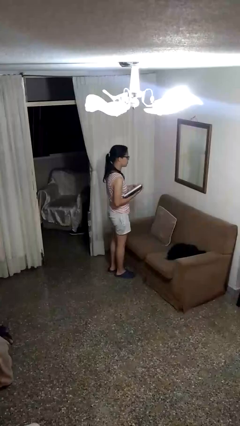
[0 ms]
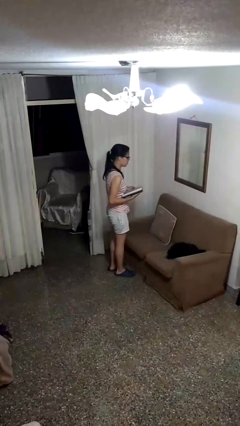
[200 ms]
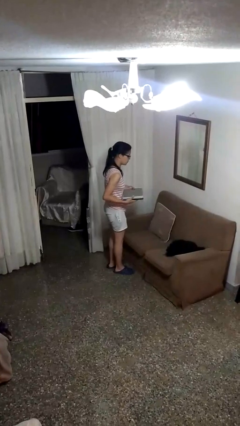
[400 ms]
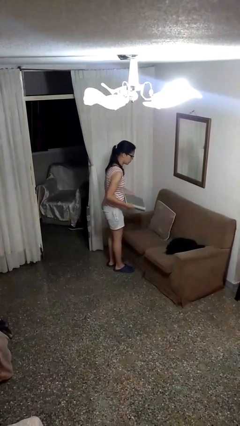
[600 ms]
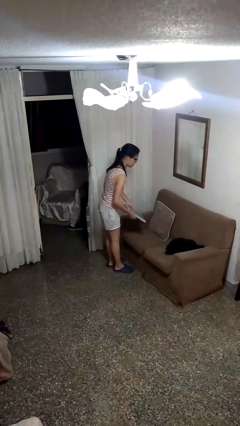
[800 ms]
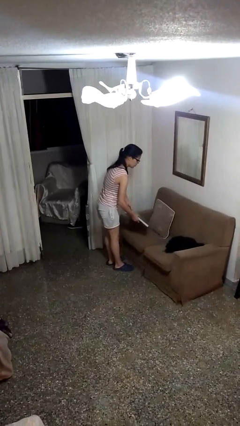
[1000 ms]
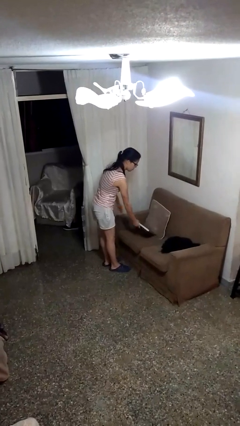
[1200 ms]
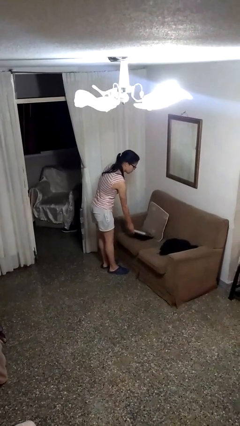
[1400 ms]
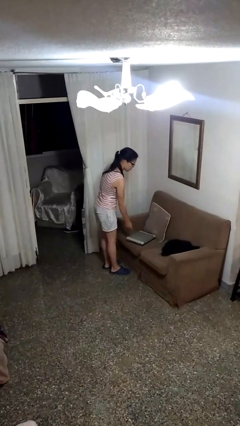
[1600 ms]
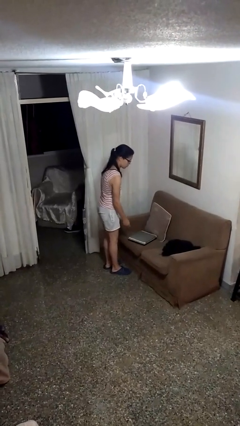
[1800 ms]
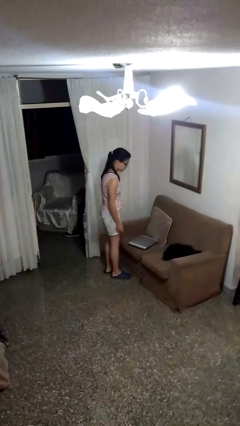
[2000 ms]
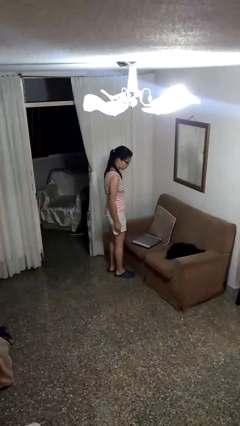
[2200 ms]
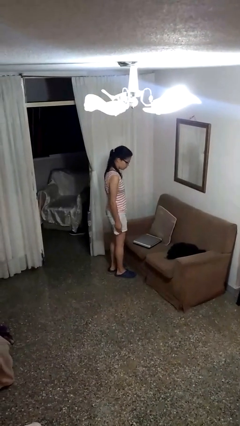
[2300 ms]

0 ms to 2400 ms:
person puts down object on couch

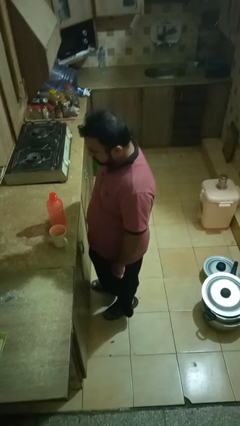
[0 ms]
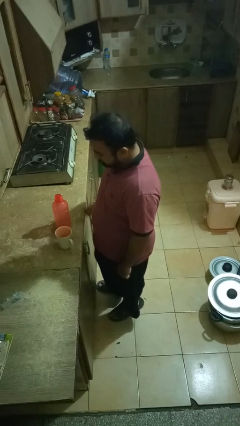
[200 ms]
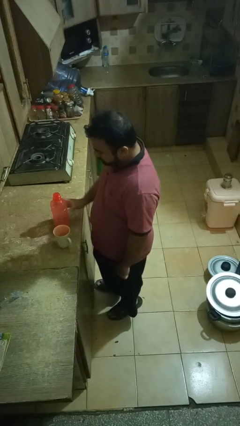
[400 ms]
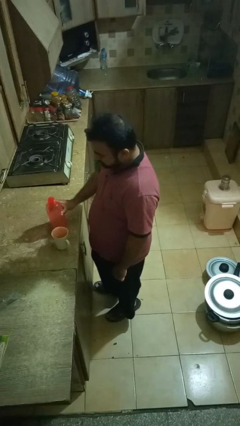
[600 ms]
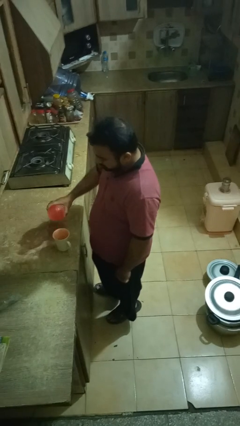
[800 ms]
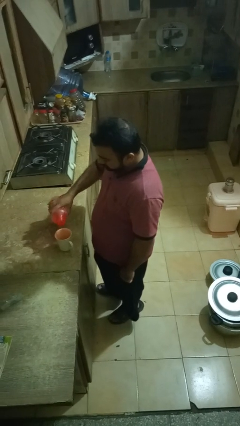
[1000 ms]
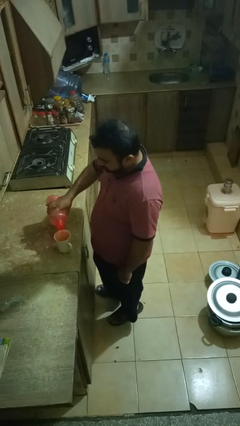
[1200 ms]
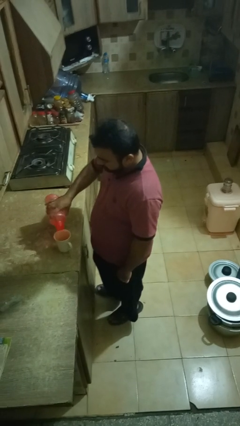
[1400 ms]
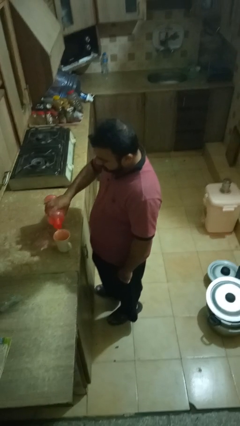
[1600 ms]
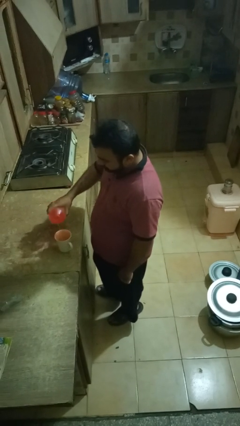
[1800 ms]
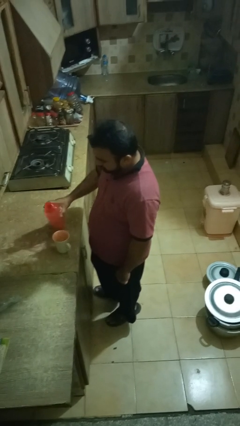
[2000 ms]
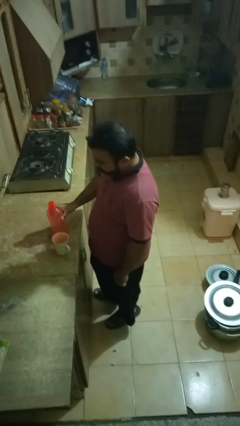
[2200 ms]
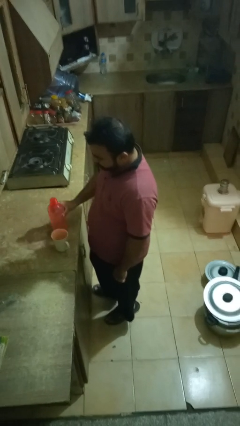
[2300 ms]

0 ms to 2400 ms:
person pours liquid into cup

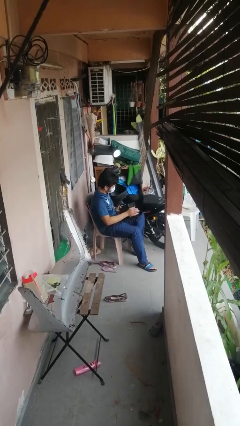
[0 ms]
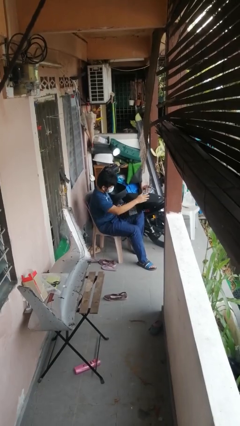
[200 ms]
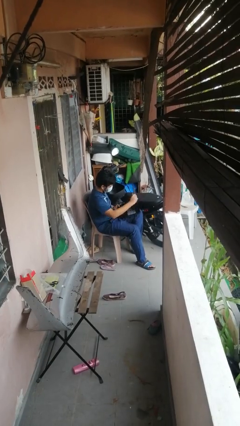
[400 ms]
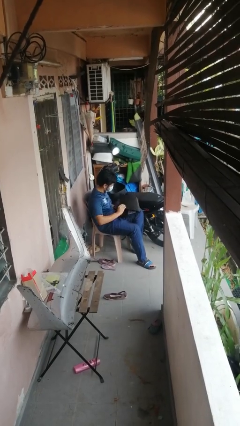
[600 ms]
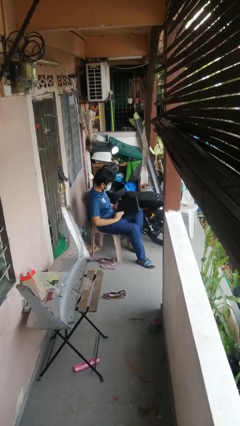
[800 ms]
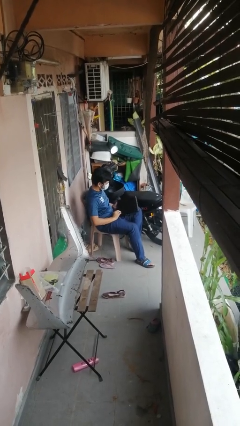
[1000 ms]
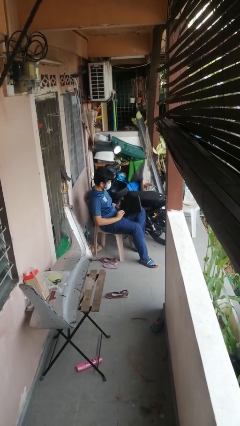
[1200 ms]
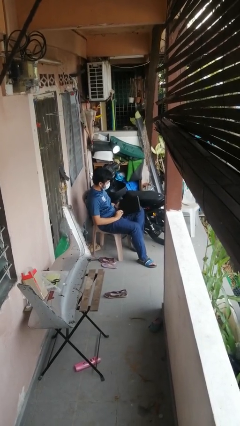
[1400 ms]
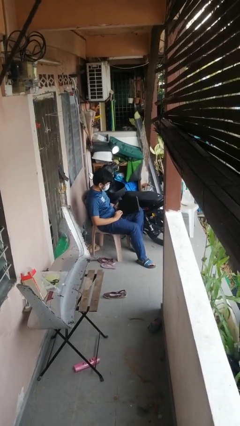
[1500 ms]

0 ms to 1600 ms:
person closes laptop

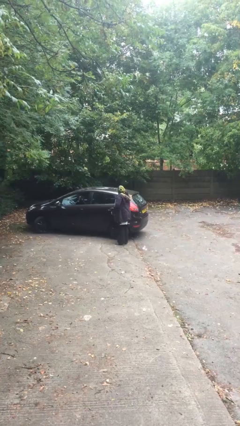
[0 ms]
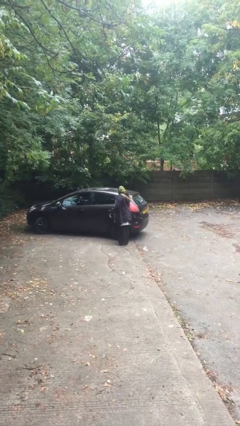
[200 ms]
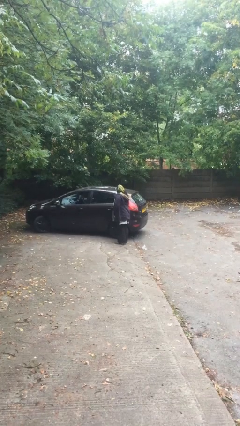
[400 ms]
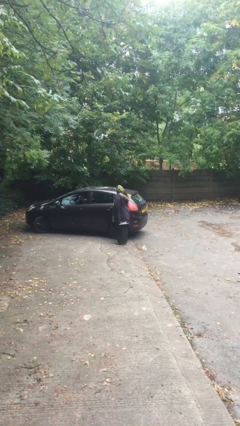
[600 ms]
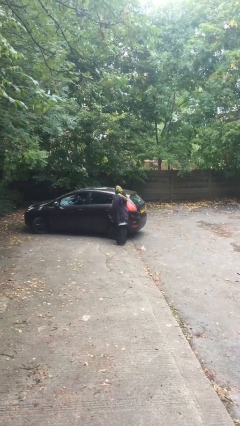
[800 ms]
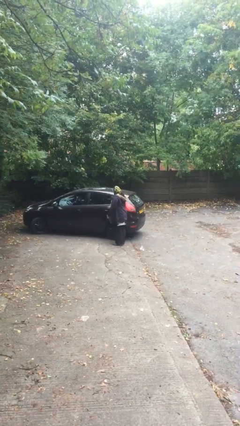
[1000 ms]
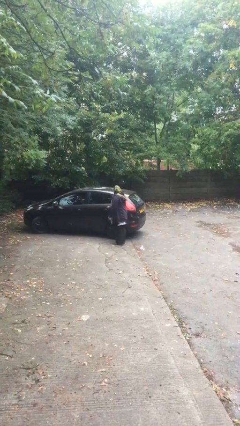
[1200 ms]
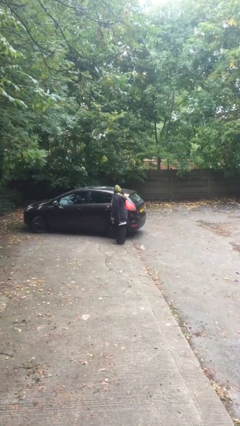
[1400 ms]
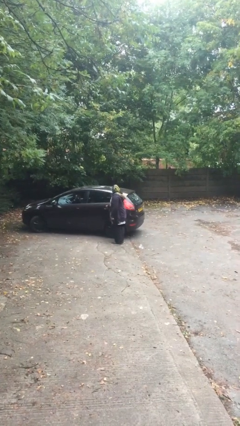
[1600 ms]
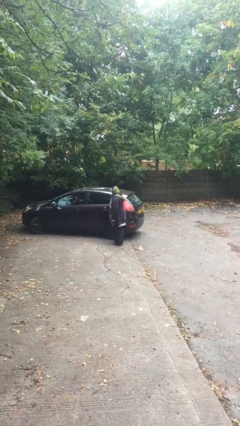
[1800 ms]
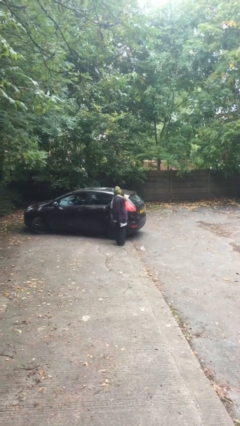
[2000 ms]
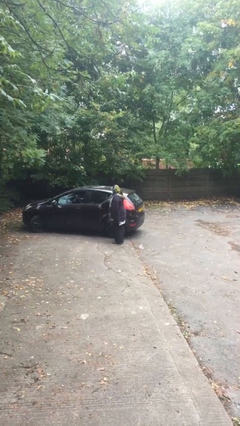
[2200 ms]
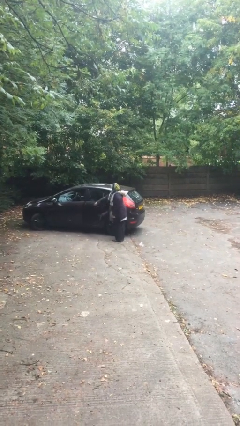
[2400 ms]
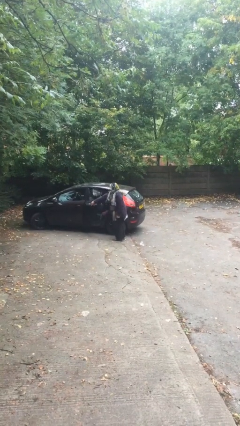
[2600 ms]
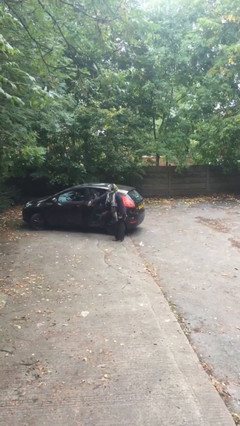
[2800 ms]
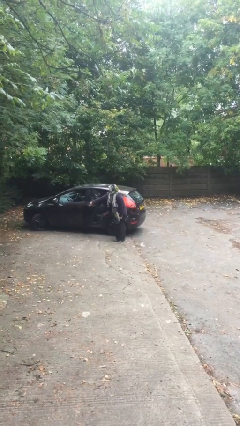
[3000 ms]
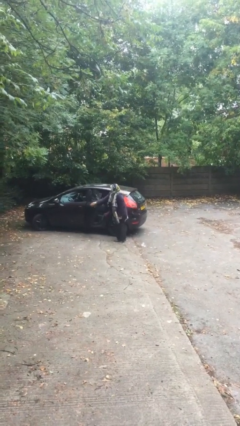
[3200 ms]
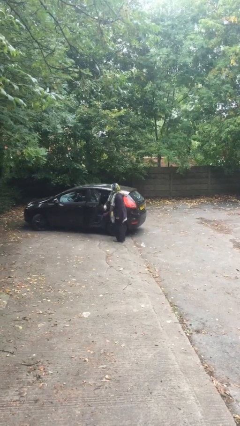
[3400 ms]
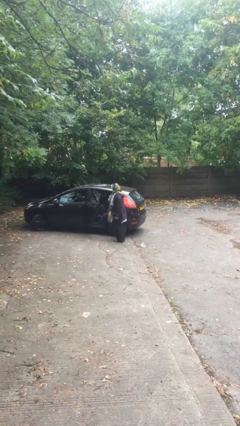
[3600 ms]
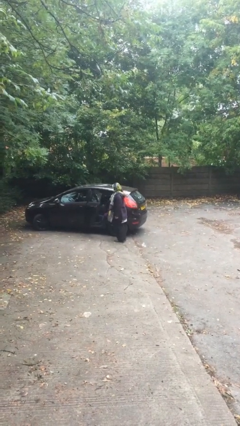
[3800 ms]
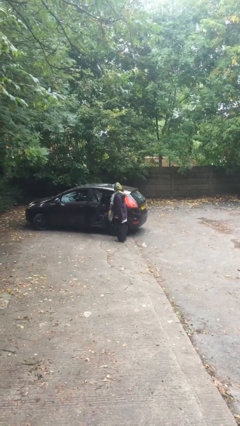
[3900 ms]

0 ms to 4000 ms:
person opens car door

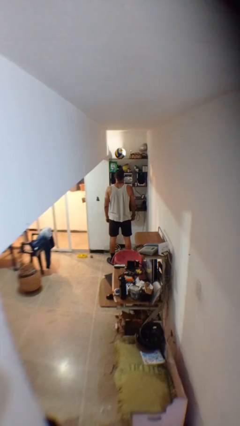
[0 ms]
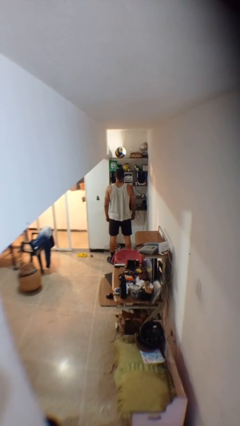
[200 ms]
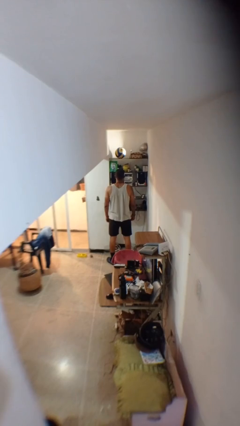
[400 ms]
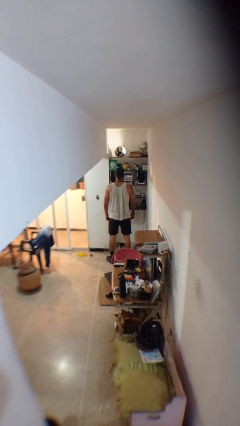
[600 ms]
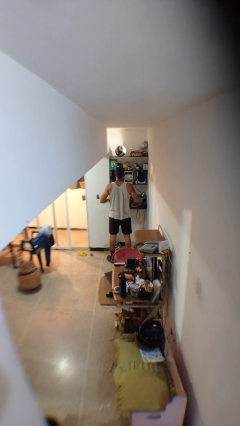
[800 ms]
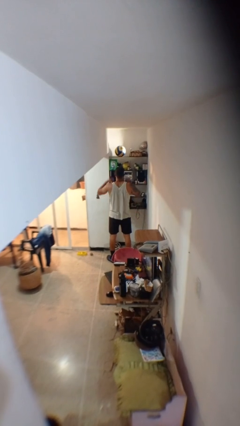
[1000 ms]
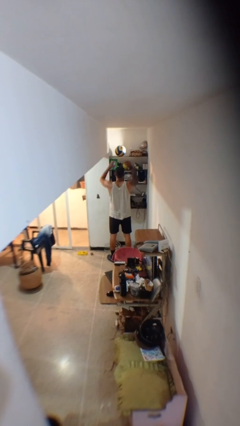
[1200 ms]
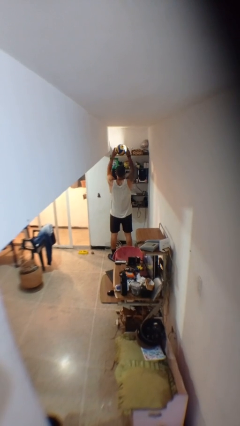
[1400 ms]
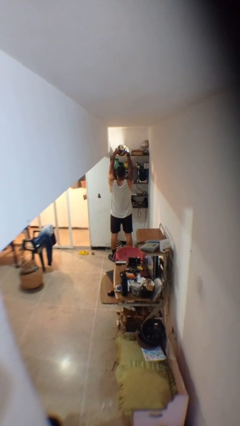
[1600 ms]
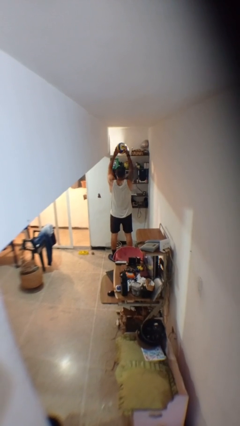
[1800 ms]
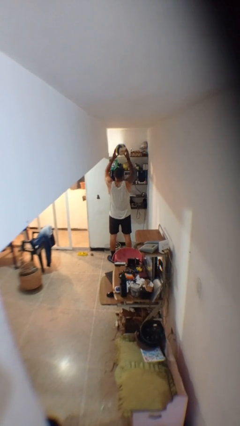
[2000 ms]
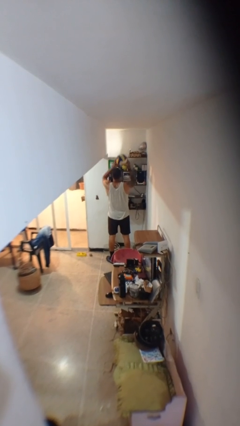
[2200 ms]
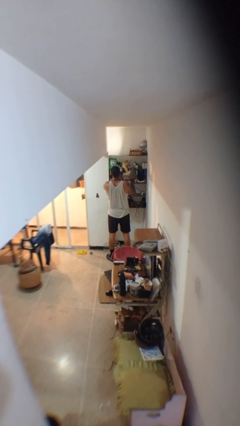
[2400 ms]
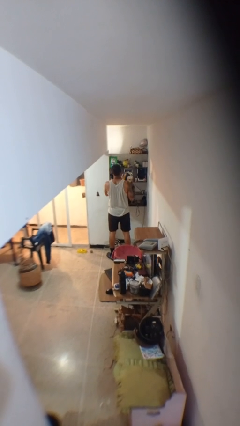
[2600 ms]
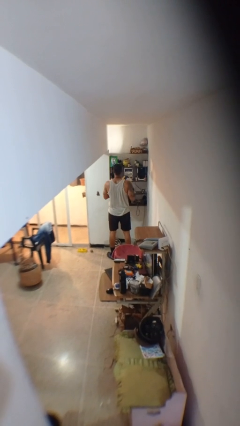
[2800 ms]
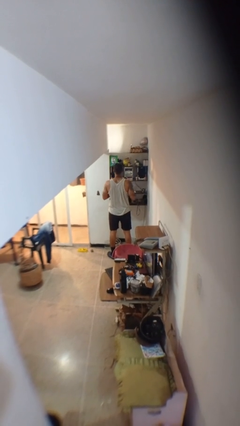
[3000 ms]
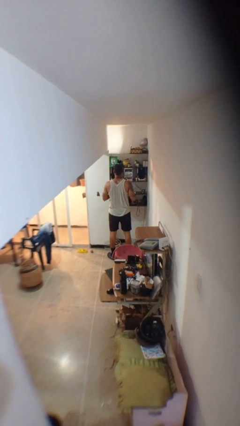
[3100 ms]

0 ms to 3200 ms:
person picks up object from shelf

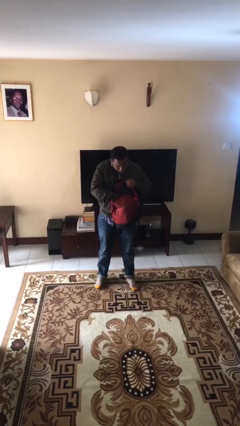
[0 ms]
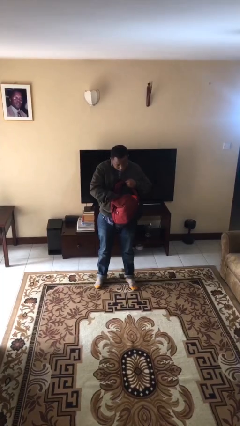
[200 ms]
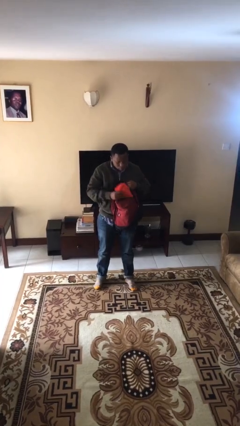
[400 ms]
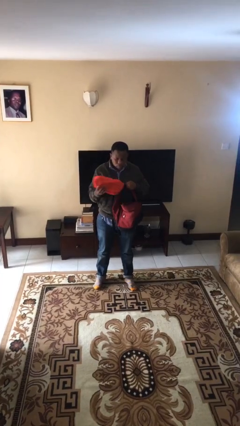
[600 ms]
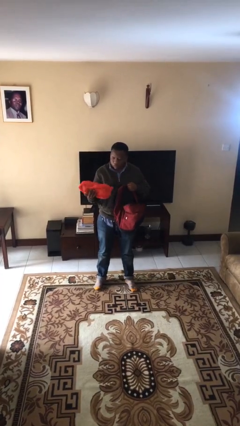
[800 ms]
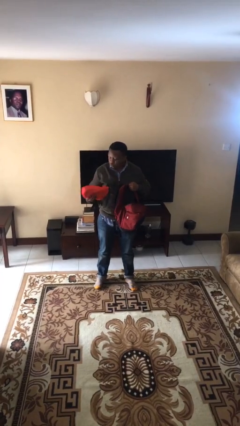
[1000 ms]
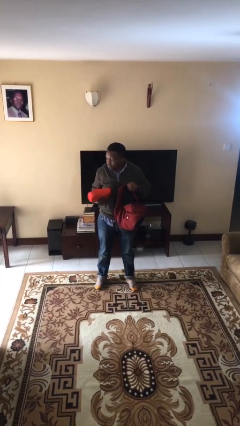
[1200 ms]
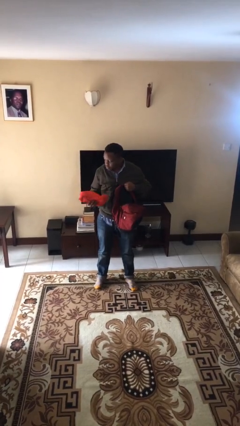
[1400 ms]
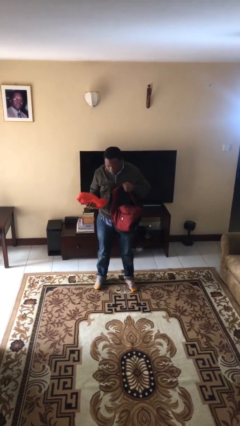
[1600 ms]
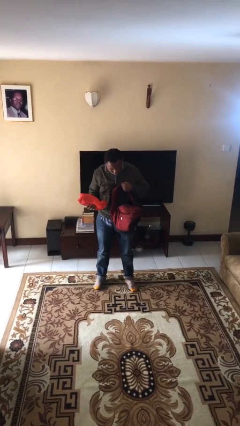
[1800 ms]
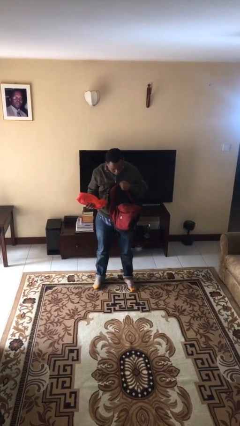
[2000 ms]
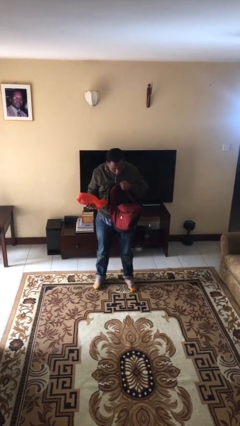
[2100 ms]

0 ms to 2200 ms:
person takes object from backpack

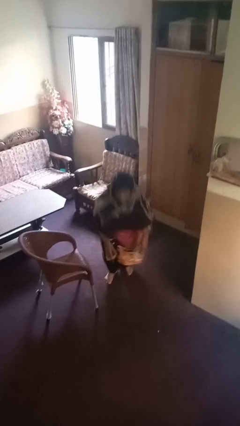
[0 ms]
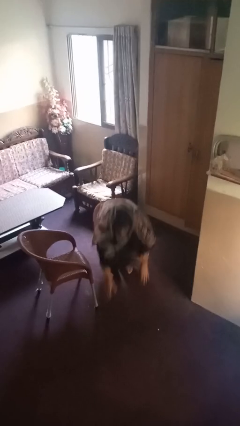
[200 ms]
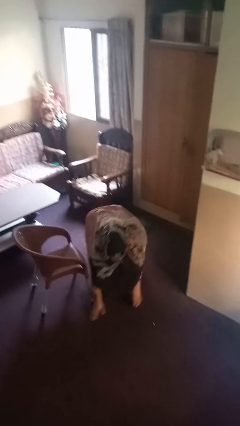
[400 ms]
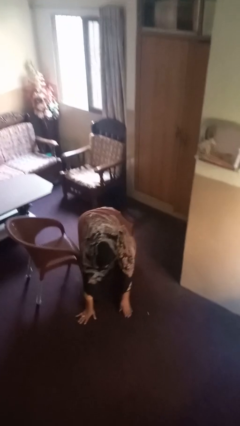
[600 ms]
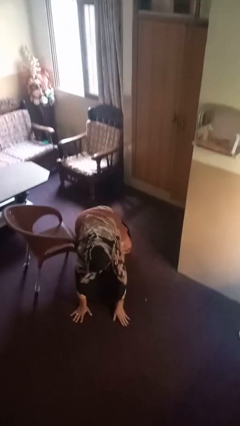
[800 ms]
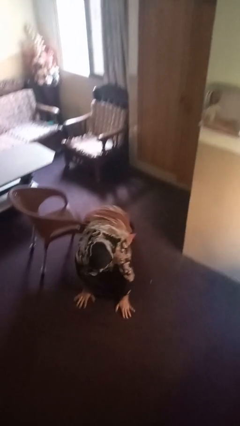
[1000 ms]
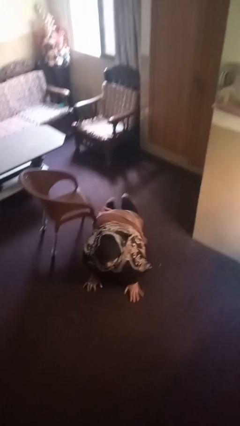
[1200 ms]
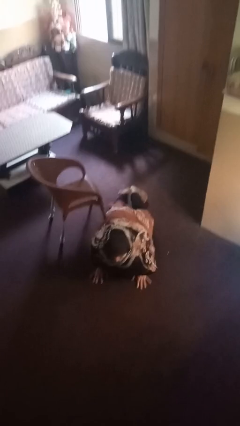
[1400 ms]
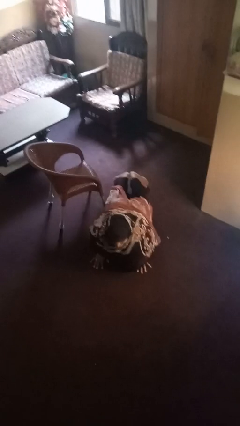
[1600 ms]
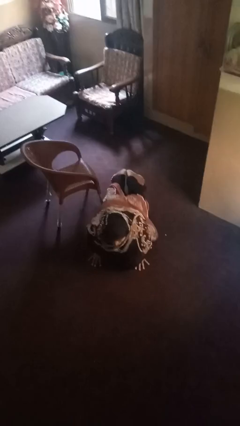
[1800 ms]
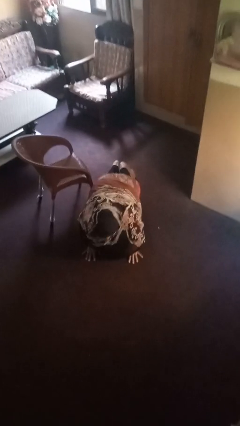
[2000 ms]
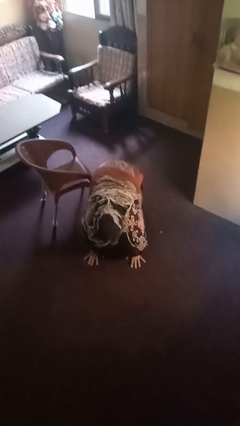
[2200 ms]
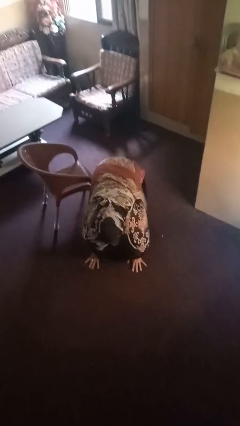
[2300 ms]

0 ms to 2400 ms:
person lies down on floor
